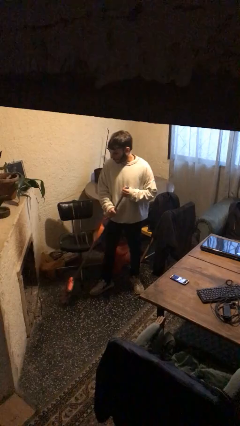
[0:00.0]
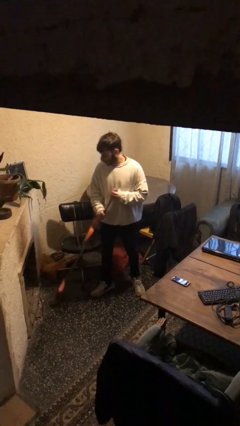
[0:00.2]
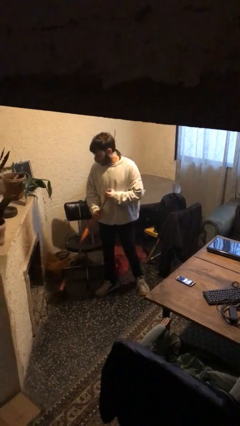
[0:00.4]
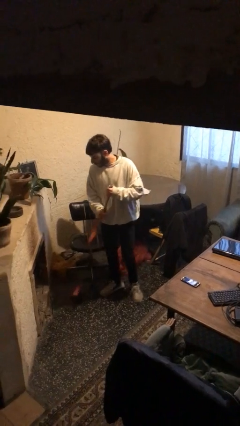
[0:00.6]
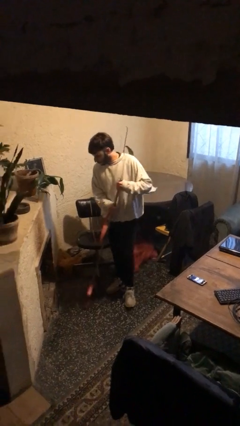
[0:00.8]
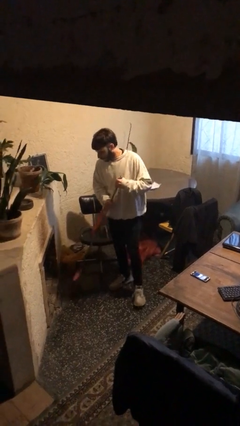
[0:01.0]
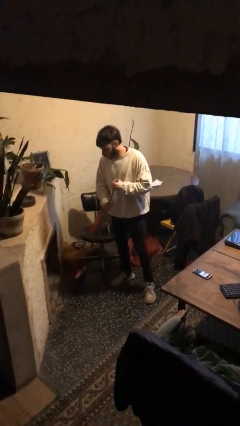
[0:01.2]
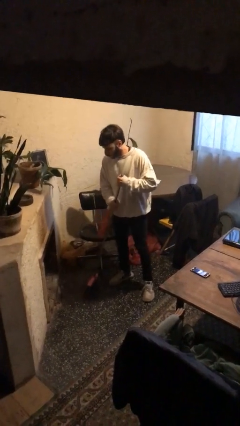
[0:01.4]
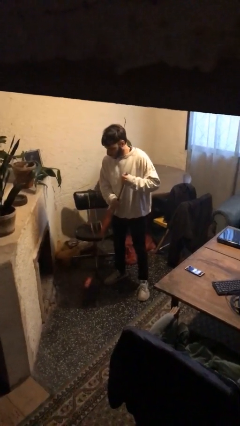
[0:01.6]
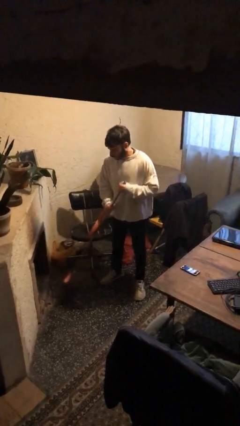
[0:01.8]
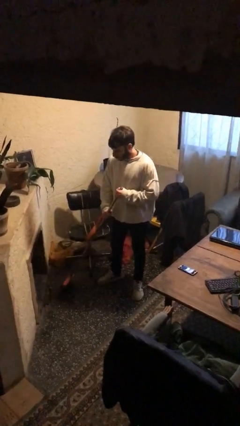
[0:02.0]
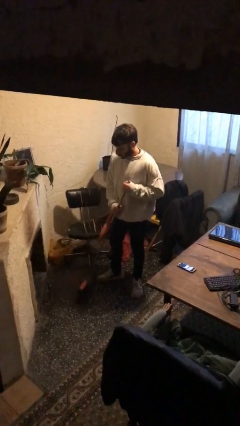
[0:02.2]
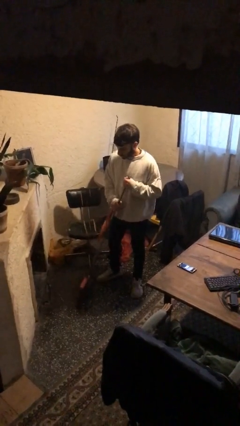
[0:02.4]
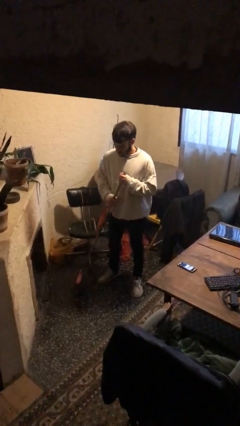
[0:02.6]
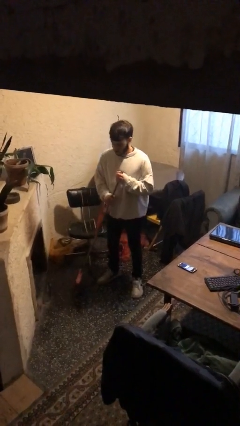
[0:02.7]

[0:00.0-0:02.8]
person sweeps floor

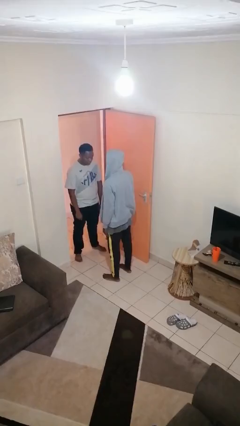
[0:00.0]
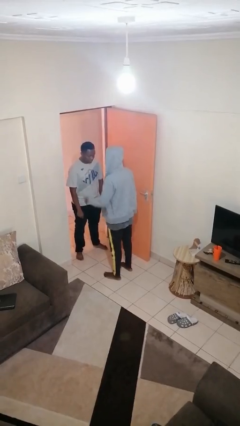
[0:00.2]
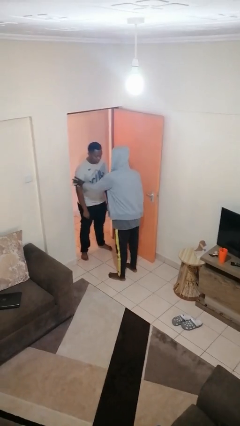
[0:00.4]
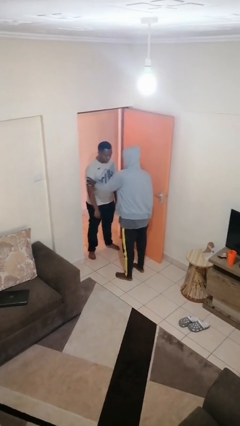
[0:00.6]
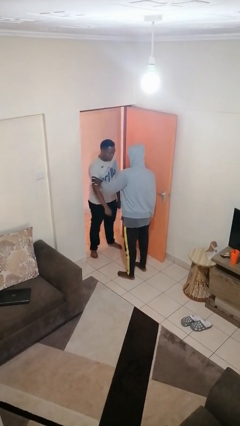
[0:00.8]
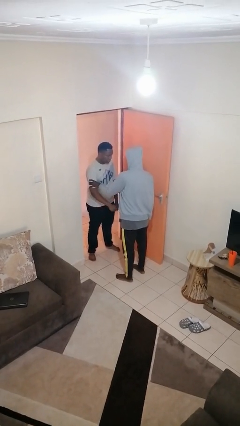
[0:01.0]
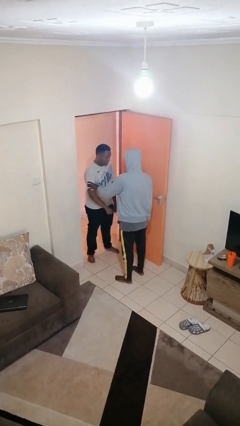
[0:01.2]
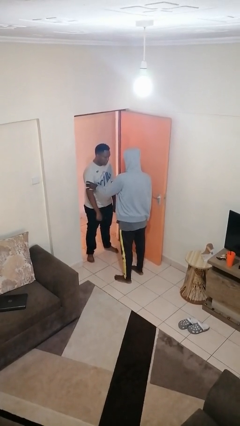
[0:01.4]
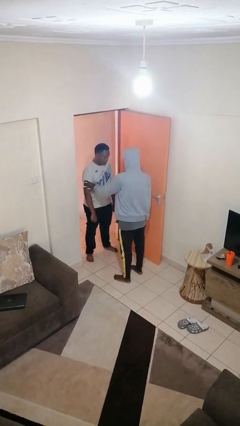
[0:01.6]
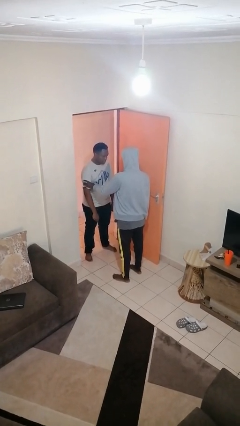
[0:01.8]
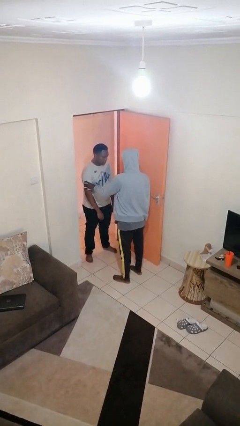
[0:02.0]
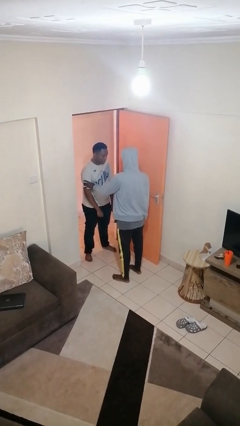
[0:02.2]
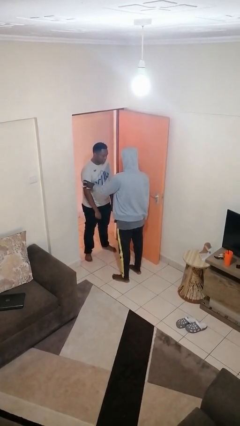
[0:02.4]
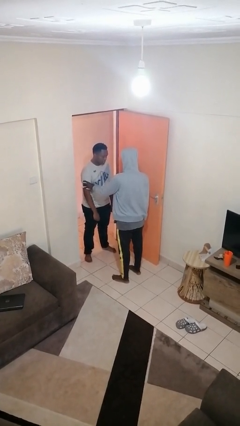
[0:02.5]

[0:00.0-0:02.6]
person grabs person by bicep

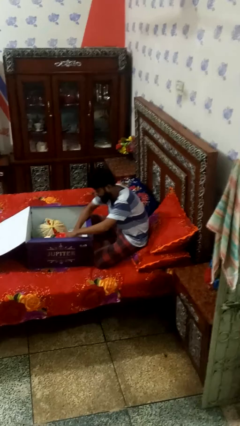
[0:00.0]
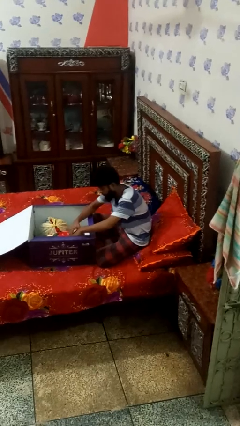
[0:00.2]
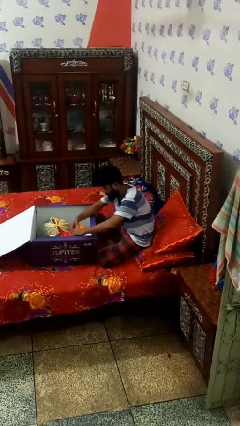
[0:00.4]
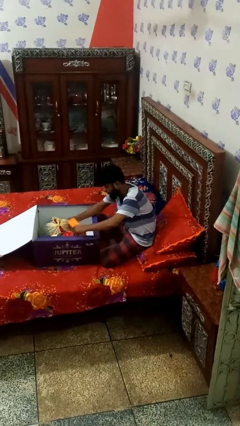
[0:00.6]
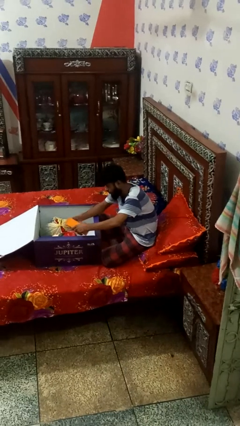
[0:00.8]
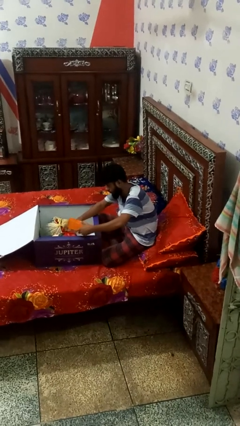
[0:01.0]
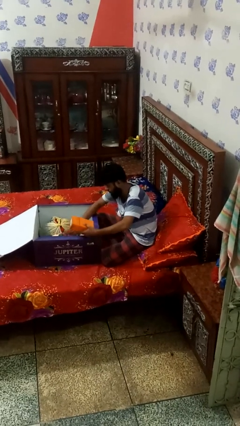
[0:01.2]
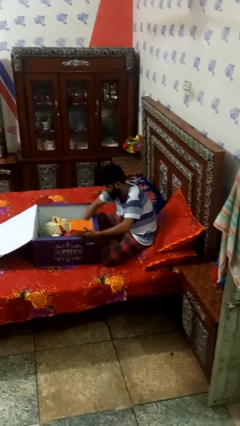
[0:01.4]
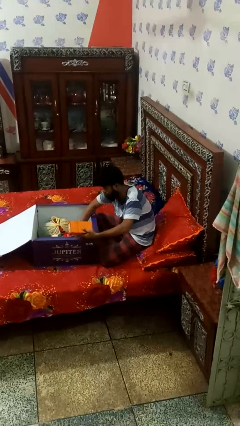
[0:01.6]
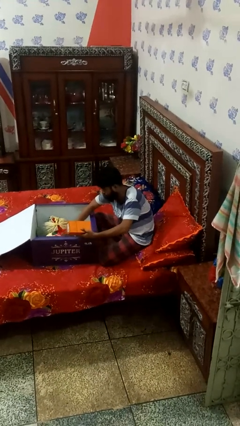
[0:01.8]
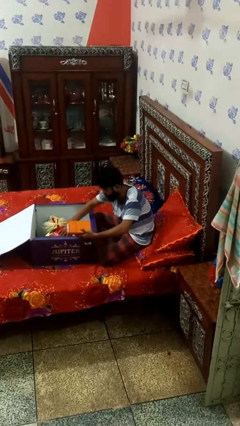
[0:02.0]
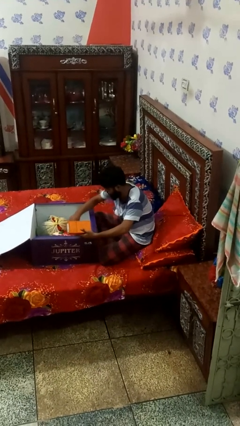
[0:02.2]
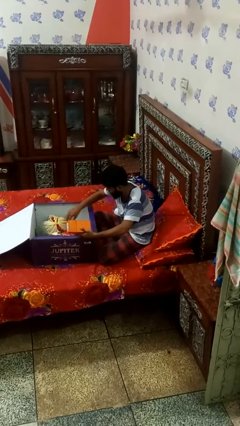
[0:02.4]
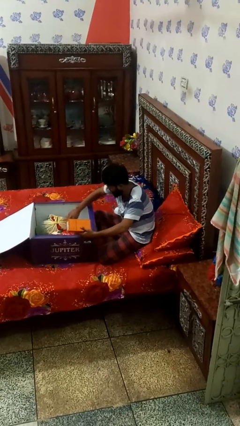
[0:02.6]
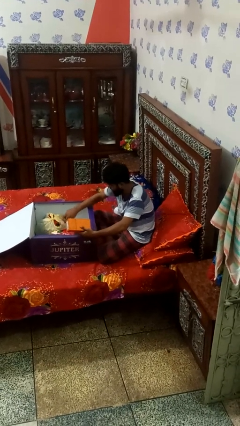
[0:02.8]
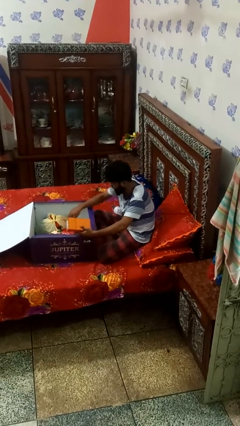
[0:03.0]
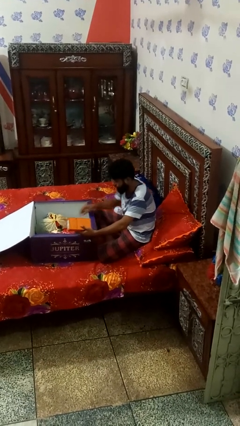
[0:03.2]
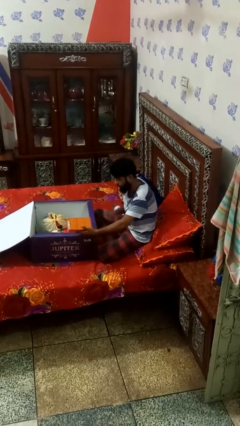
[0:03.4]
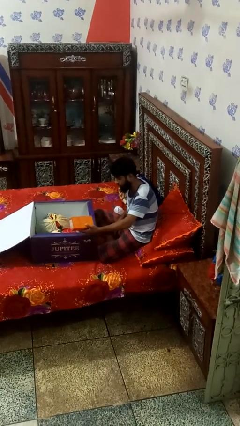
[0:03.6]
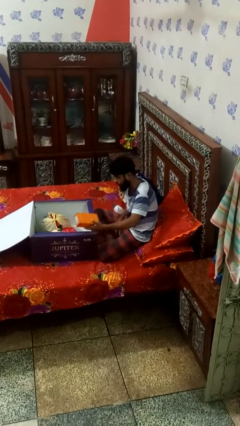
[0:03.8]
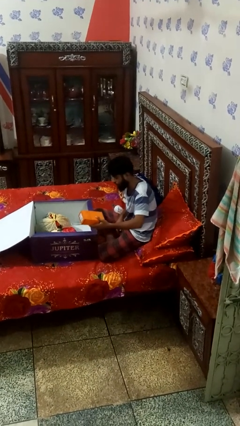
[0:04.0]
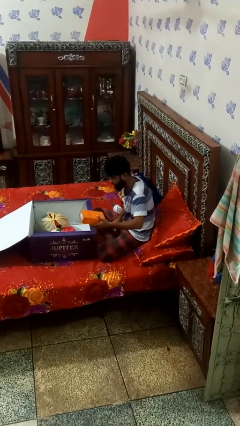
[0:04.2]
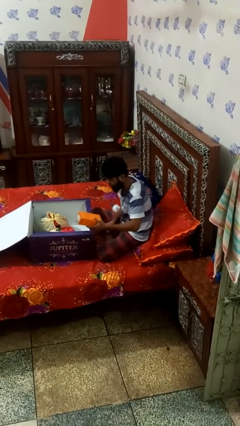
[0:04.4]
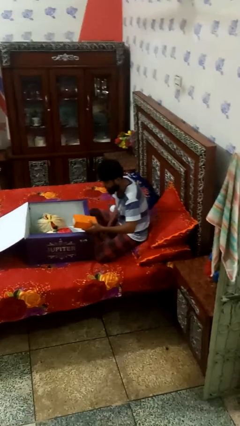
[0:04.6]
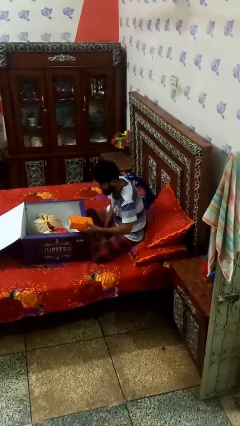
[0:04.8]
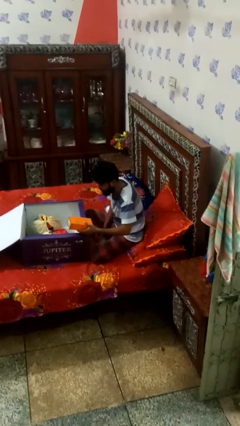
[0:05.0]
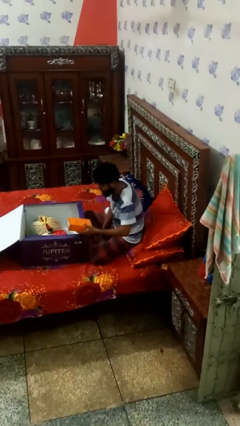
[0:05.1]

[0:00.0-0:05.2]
person takes object from box

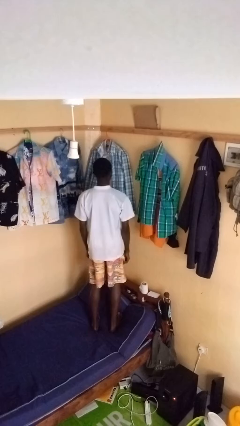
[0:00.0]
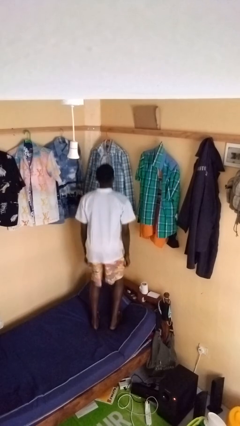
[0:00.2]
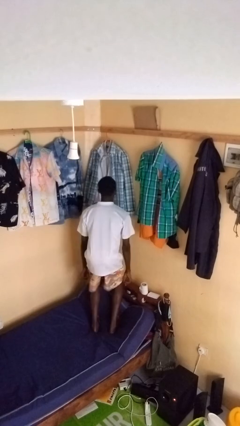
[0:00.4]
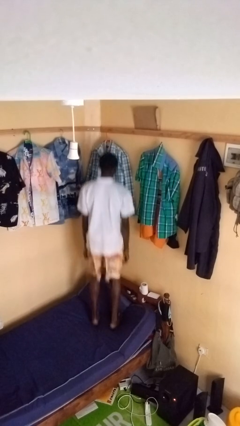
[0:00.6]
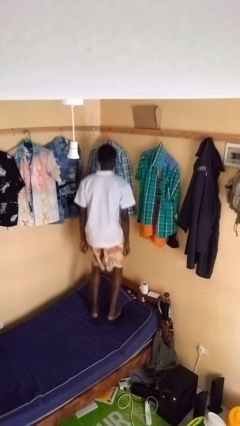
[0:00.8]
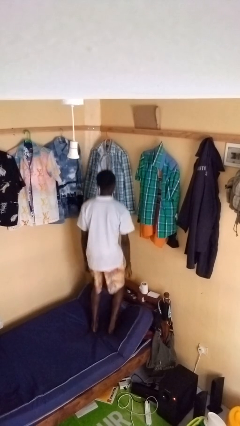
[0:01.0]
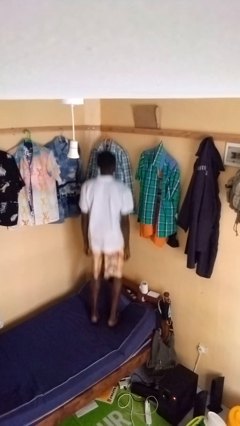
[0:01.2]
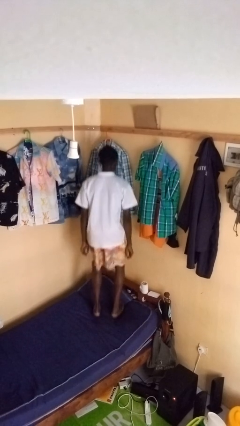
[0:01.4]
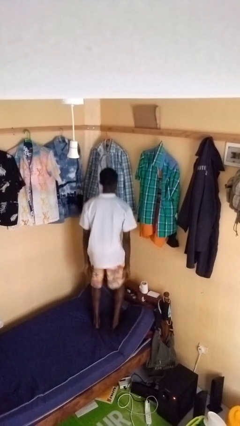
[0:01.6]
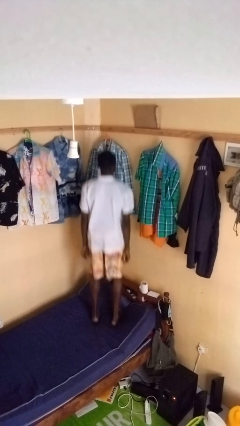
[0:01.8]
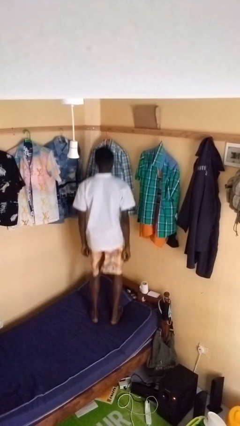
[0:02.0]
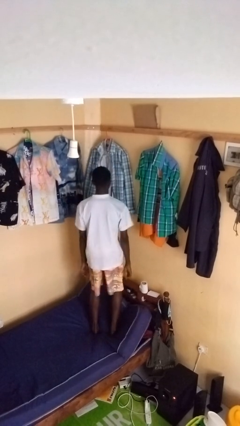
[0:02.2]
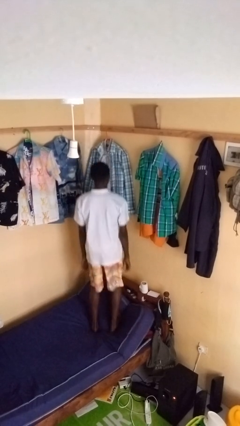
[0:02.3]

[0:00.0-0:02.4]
person jumps on bed

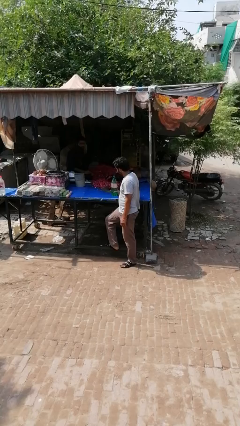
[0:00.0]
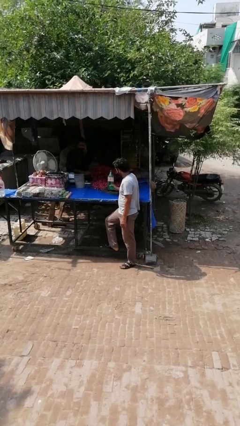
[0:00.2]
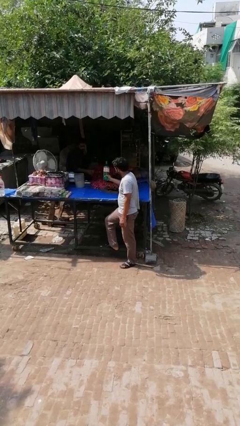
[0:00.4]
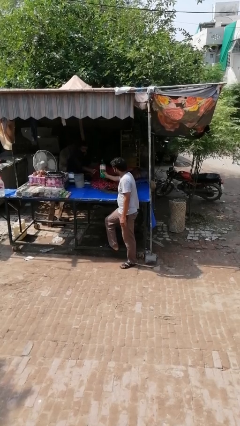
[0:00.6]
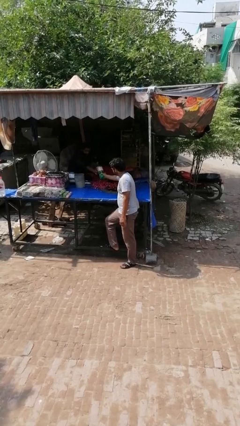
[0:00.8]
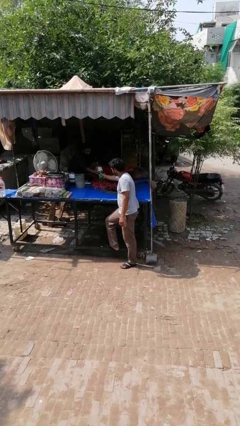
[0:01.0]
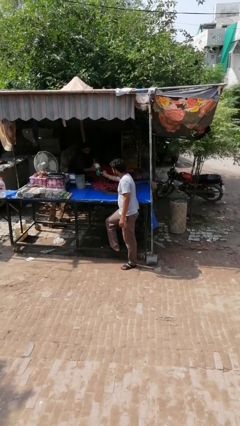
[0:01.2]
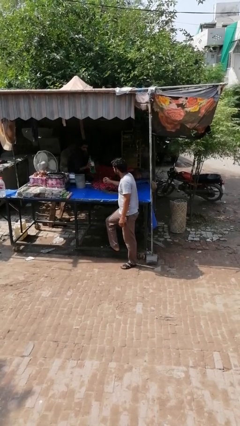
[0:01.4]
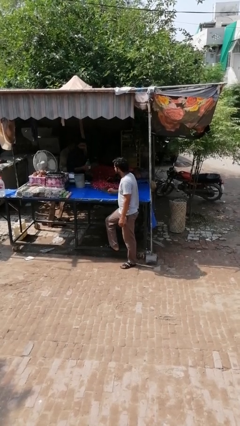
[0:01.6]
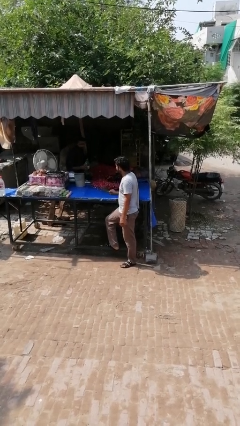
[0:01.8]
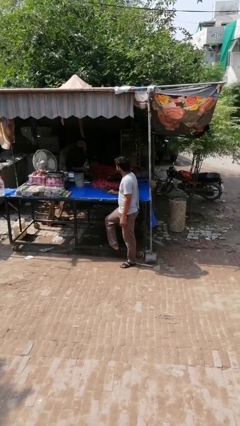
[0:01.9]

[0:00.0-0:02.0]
person transfers object to person

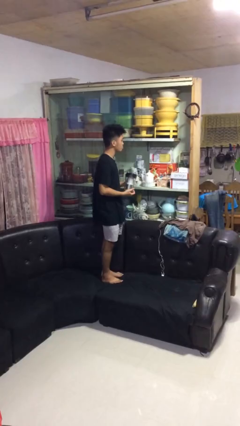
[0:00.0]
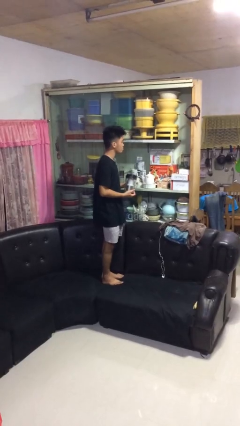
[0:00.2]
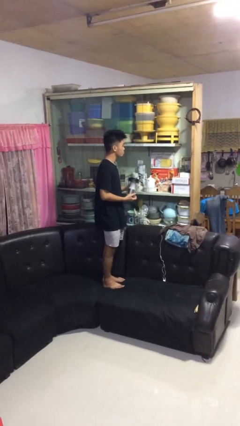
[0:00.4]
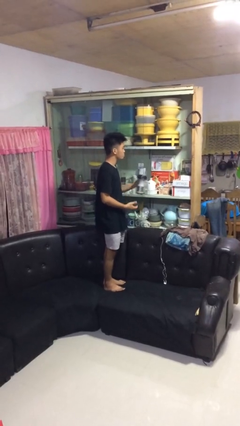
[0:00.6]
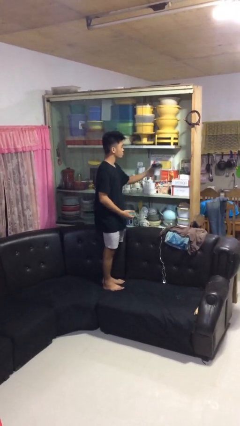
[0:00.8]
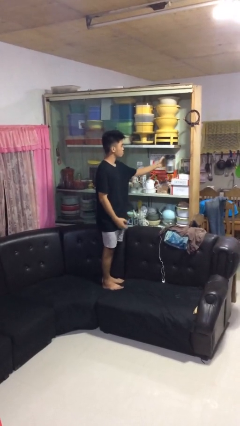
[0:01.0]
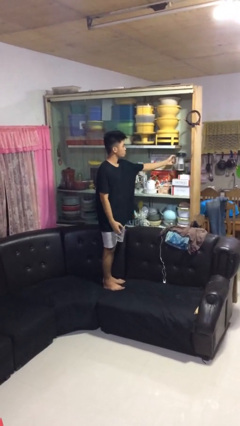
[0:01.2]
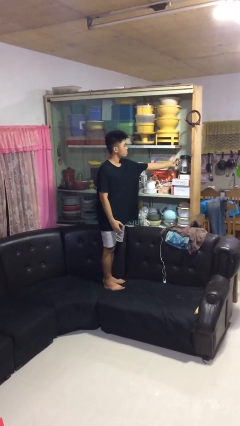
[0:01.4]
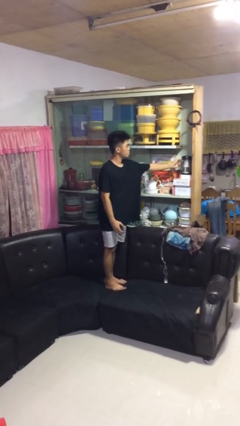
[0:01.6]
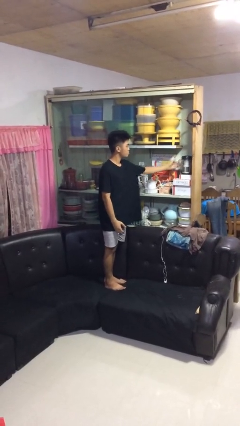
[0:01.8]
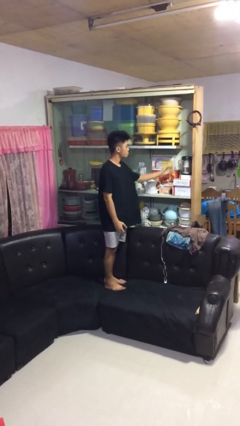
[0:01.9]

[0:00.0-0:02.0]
person puts down object into cabinet

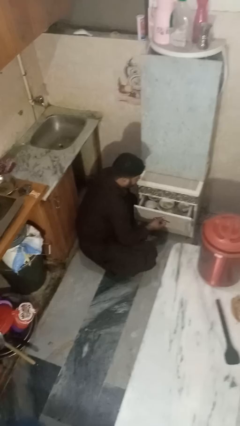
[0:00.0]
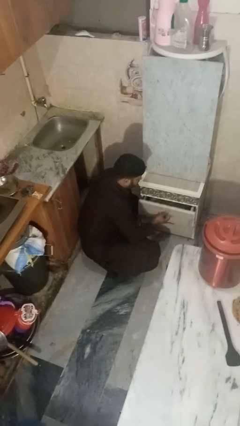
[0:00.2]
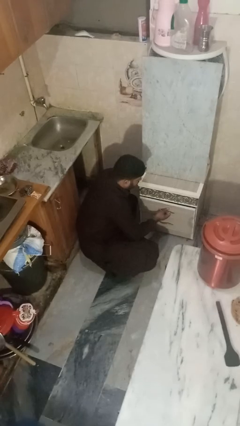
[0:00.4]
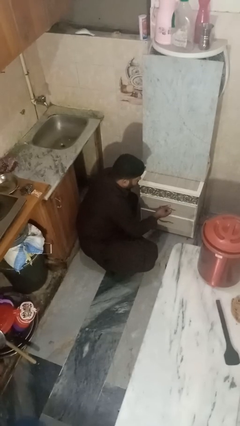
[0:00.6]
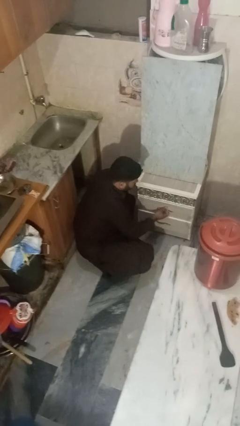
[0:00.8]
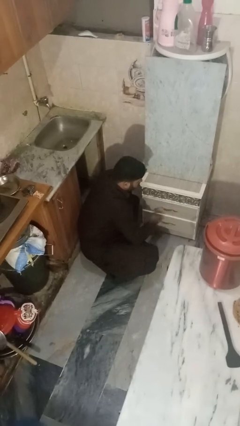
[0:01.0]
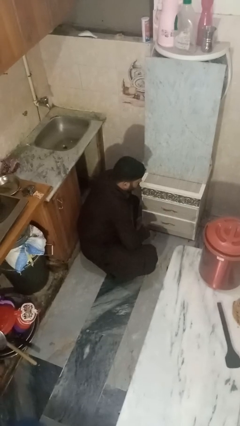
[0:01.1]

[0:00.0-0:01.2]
person closes kitchen drawer
